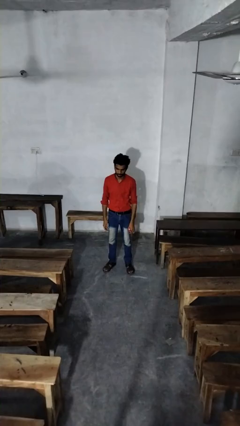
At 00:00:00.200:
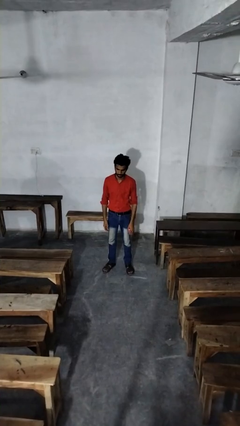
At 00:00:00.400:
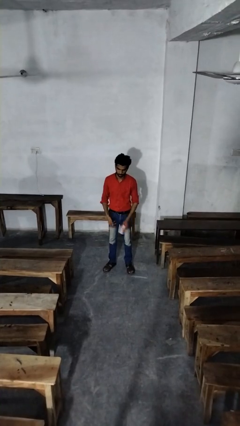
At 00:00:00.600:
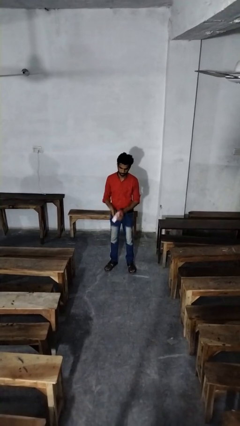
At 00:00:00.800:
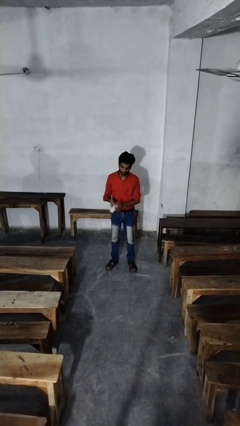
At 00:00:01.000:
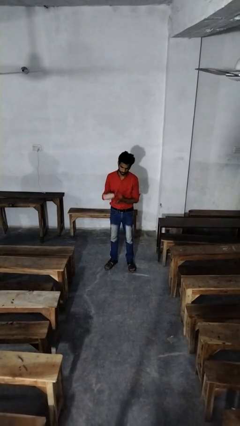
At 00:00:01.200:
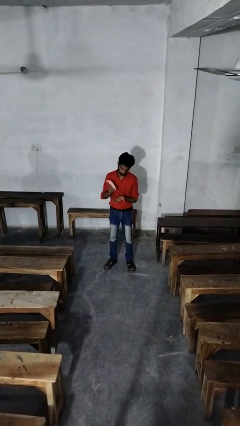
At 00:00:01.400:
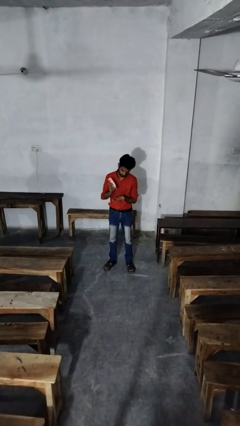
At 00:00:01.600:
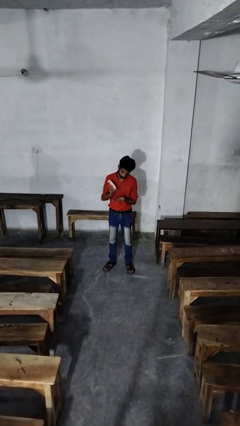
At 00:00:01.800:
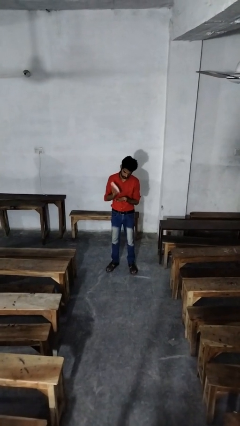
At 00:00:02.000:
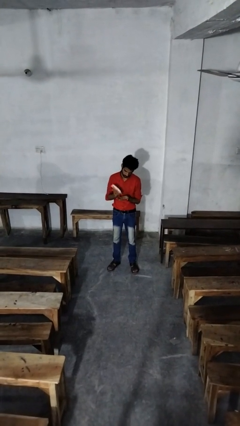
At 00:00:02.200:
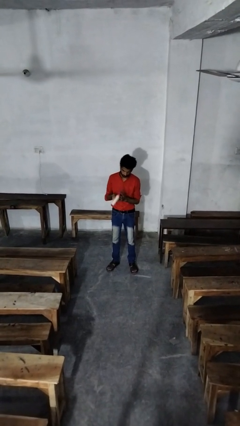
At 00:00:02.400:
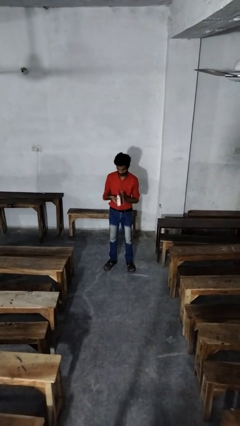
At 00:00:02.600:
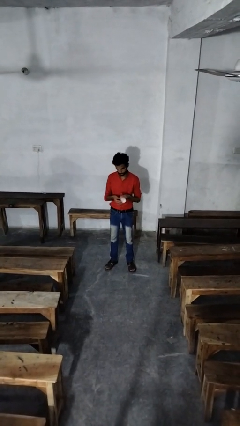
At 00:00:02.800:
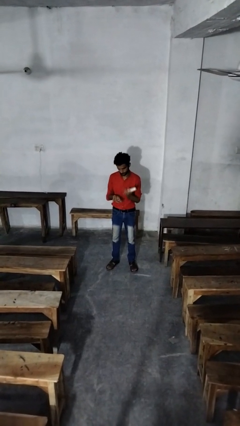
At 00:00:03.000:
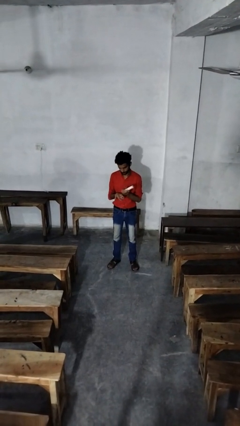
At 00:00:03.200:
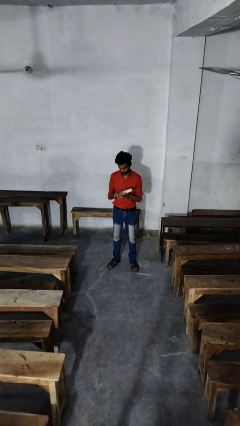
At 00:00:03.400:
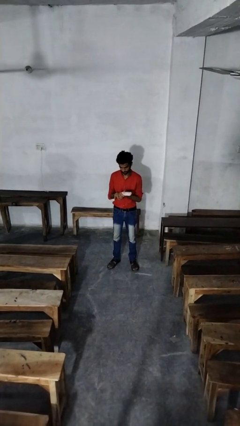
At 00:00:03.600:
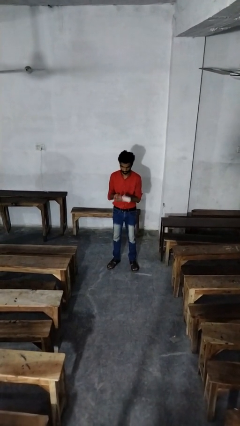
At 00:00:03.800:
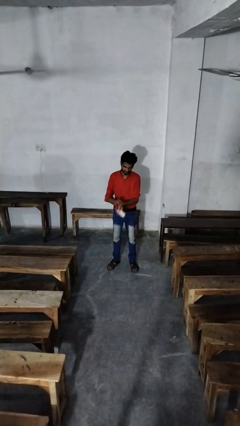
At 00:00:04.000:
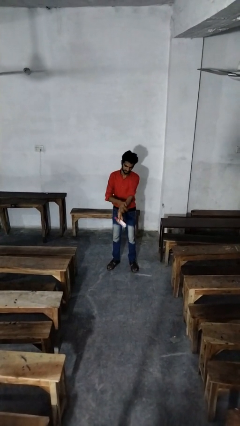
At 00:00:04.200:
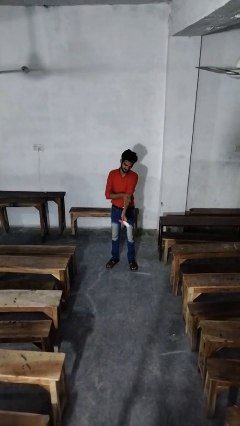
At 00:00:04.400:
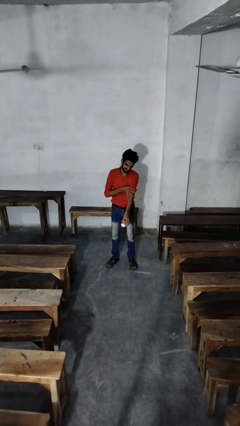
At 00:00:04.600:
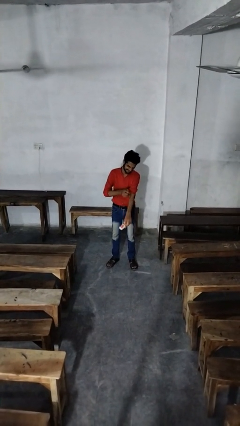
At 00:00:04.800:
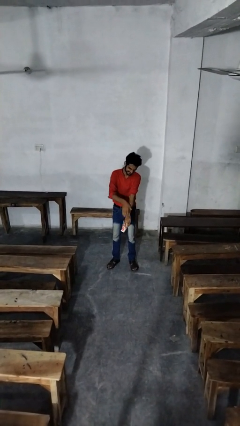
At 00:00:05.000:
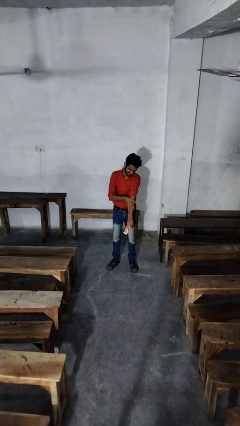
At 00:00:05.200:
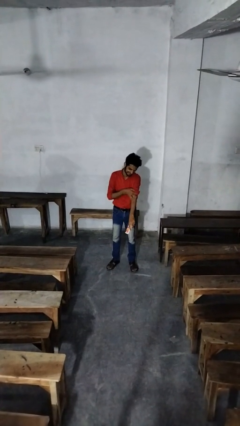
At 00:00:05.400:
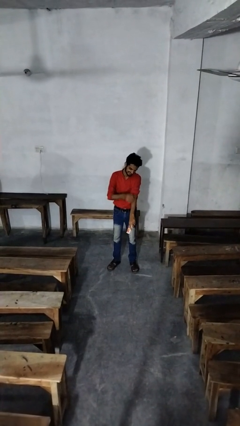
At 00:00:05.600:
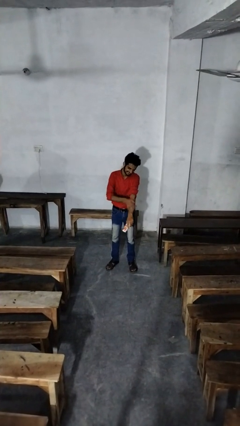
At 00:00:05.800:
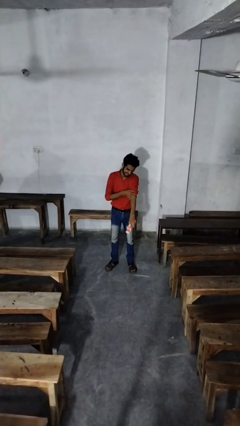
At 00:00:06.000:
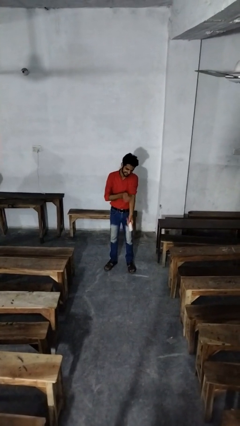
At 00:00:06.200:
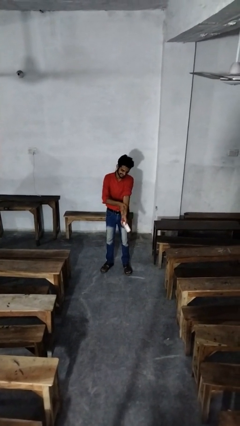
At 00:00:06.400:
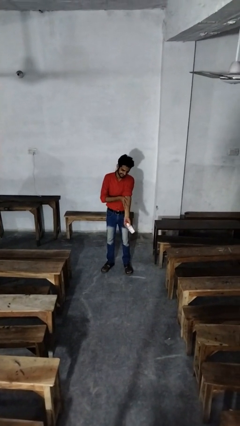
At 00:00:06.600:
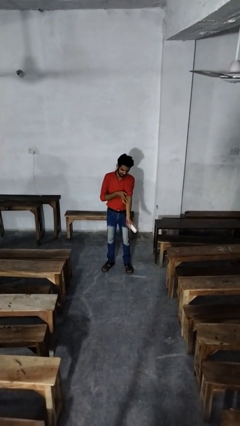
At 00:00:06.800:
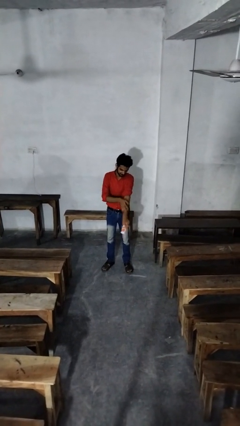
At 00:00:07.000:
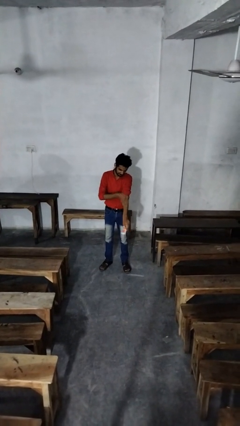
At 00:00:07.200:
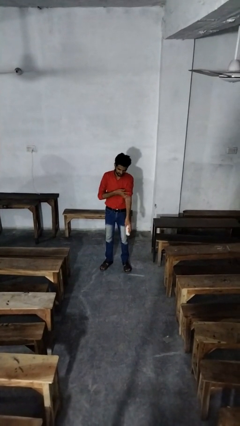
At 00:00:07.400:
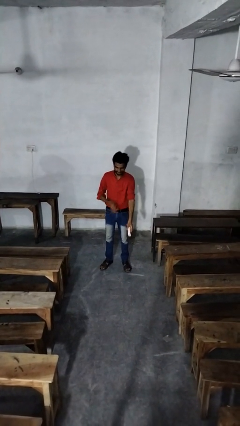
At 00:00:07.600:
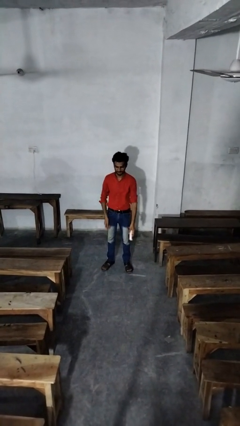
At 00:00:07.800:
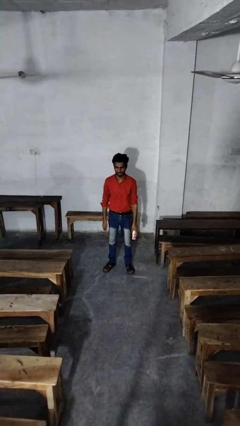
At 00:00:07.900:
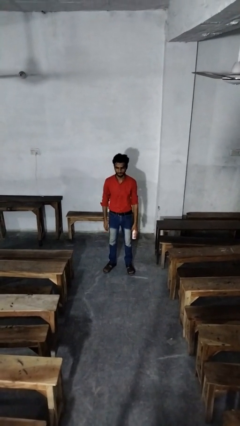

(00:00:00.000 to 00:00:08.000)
person applies sunscreen

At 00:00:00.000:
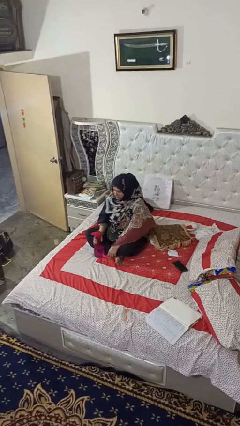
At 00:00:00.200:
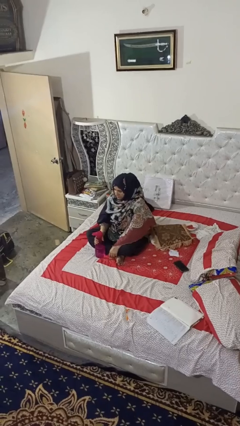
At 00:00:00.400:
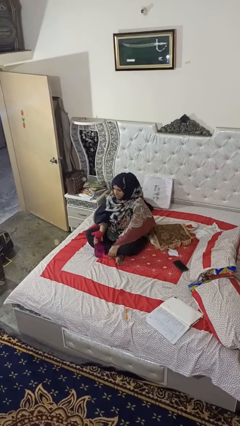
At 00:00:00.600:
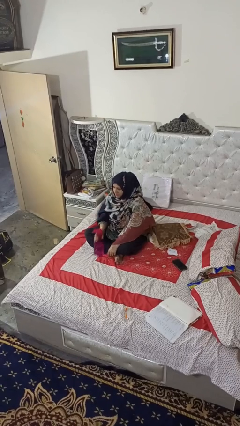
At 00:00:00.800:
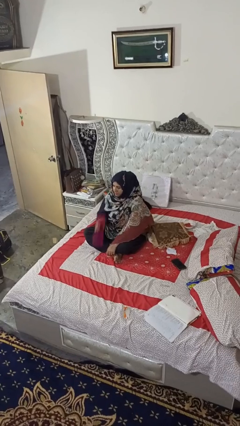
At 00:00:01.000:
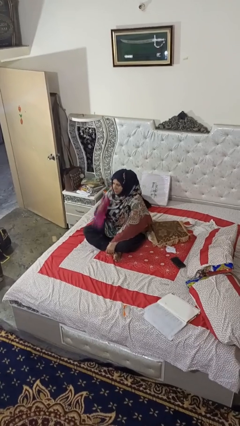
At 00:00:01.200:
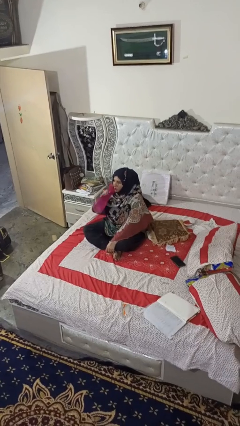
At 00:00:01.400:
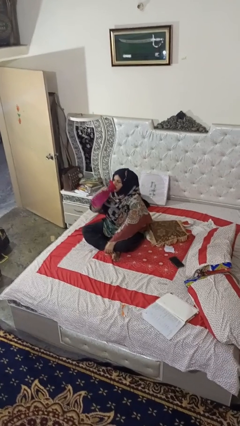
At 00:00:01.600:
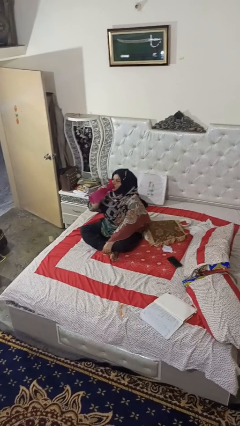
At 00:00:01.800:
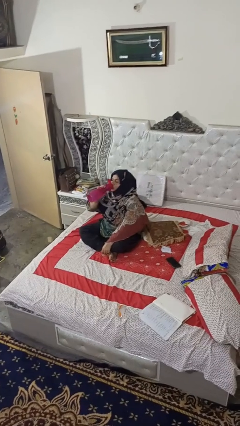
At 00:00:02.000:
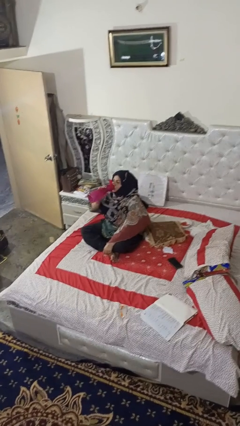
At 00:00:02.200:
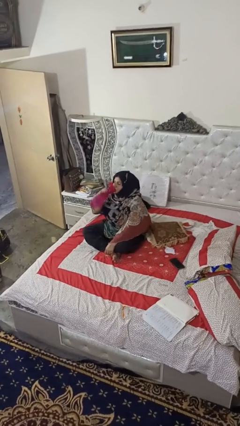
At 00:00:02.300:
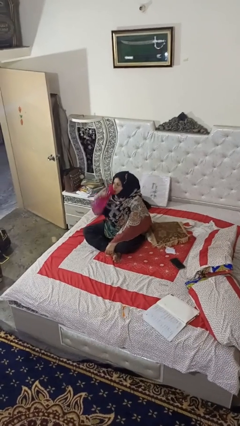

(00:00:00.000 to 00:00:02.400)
person drinks from bottle

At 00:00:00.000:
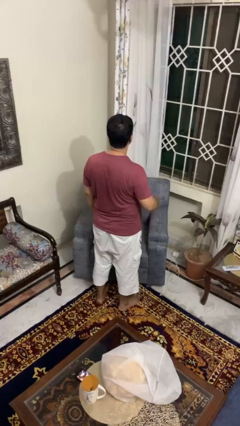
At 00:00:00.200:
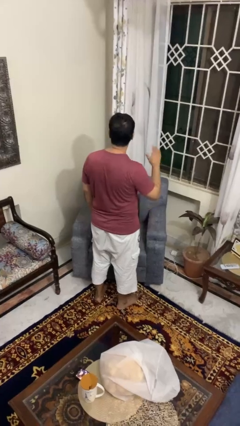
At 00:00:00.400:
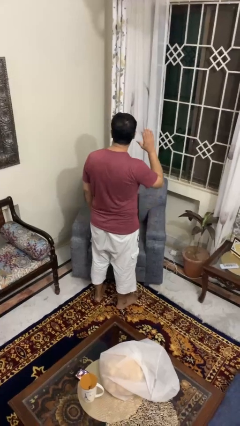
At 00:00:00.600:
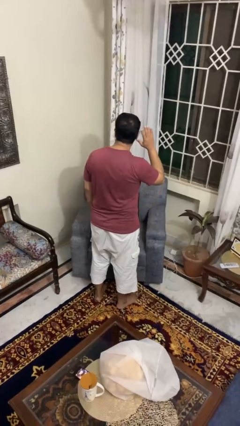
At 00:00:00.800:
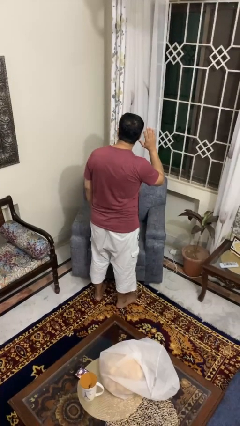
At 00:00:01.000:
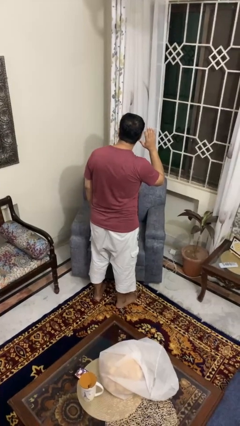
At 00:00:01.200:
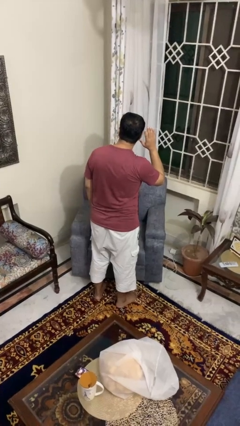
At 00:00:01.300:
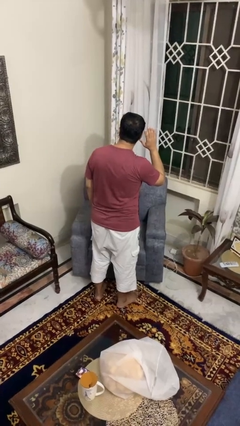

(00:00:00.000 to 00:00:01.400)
person gestures listen closely

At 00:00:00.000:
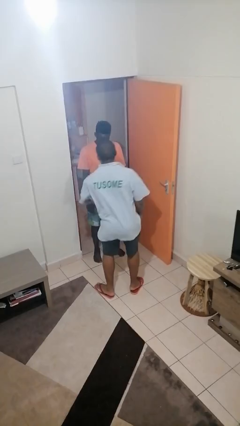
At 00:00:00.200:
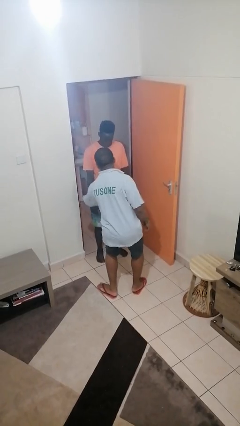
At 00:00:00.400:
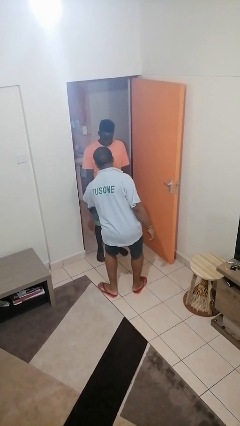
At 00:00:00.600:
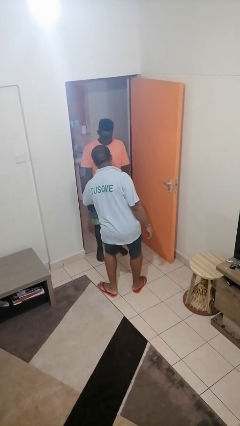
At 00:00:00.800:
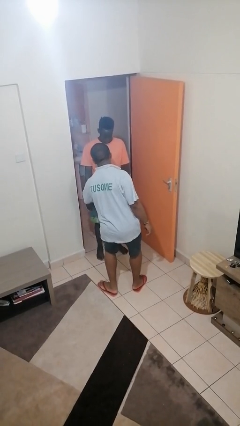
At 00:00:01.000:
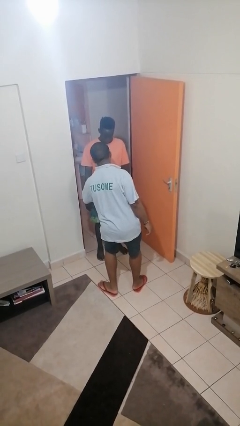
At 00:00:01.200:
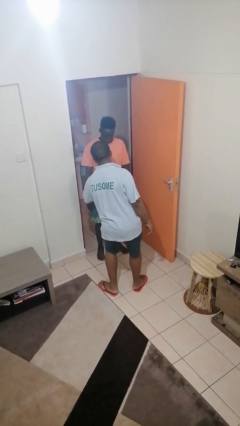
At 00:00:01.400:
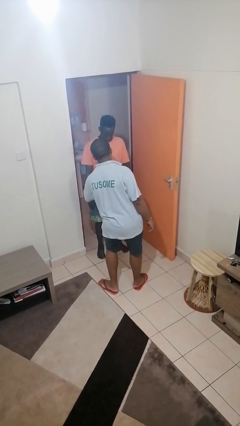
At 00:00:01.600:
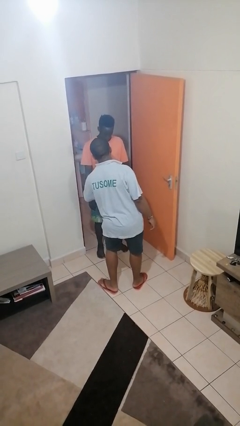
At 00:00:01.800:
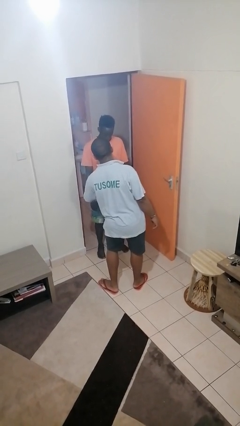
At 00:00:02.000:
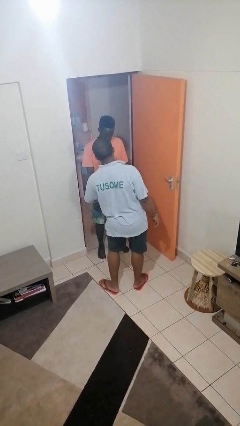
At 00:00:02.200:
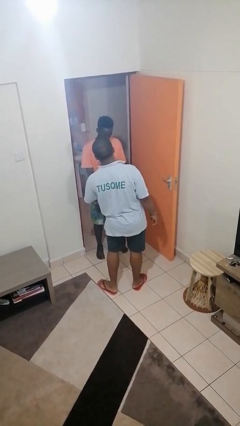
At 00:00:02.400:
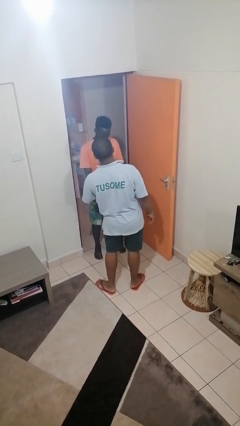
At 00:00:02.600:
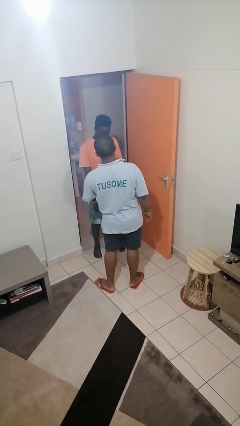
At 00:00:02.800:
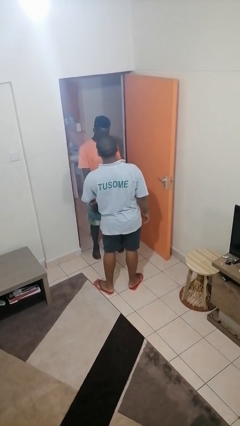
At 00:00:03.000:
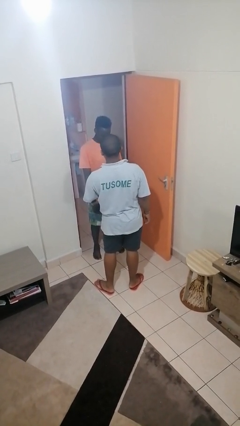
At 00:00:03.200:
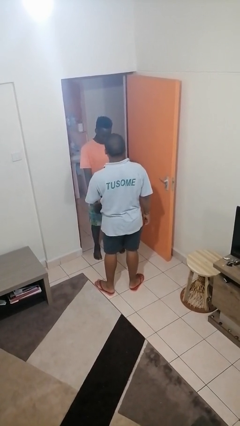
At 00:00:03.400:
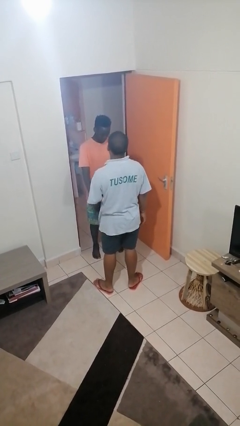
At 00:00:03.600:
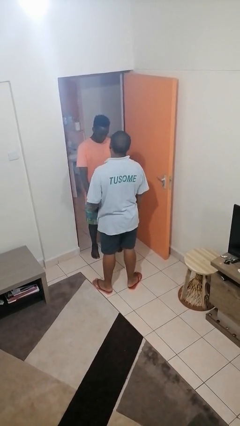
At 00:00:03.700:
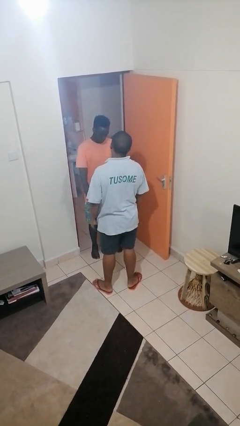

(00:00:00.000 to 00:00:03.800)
person grabs person by forearm

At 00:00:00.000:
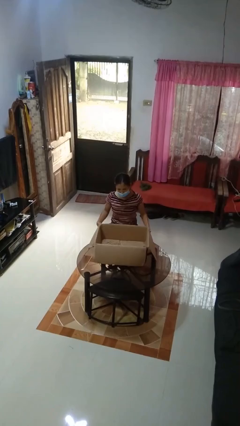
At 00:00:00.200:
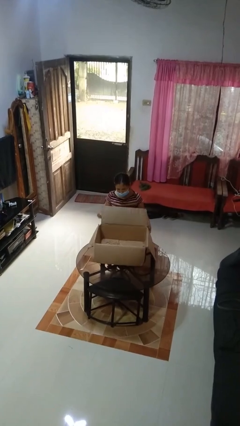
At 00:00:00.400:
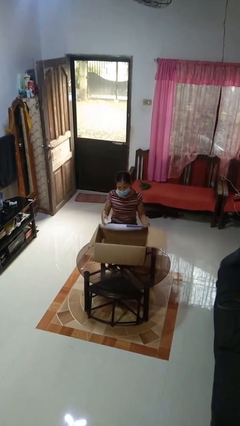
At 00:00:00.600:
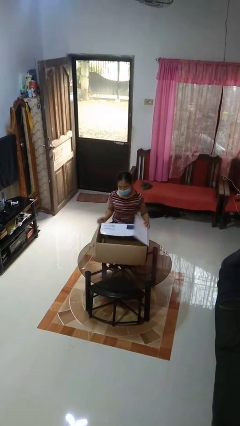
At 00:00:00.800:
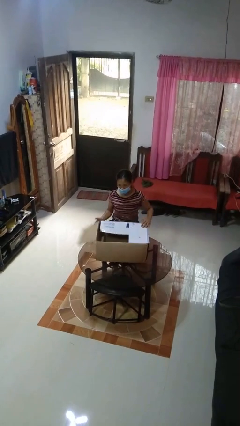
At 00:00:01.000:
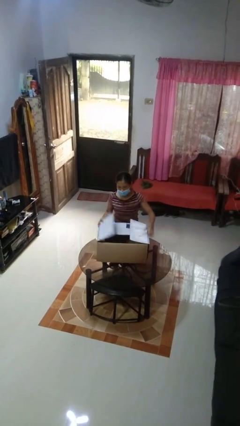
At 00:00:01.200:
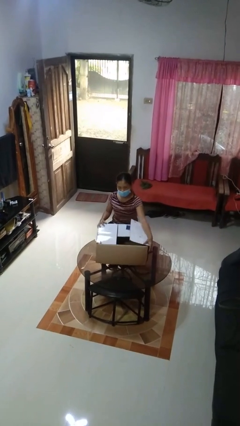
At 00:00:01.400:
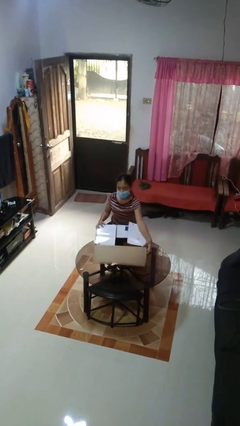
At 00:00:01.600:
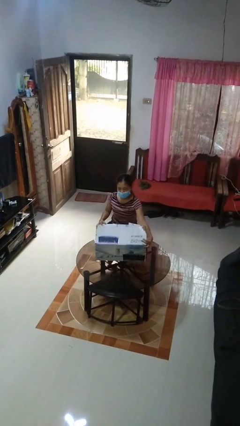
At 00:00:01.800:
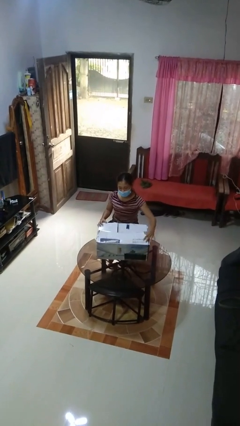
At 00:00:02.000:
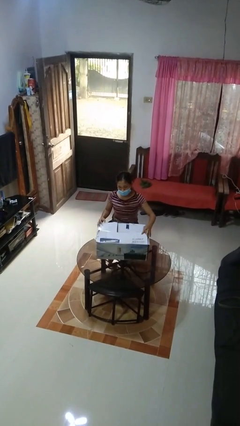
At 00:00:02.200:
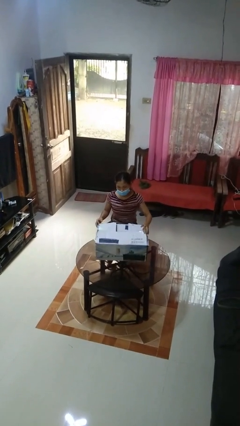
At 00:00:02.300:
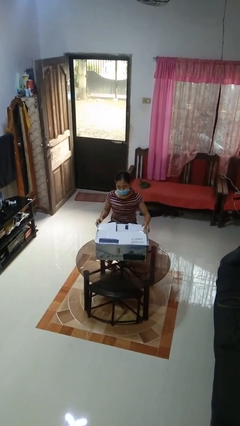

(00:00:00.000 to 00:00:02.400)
person closes box
